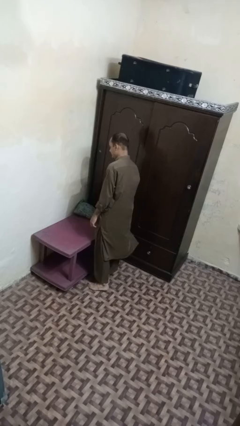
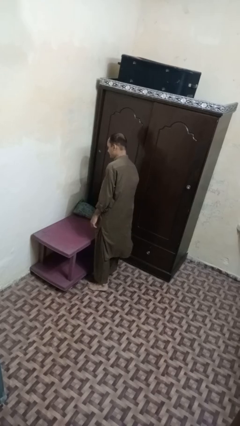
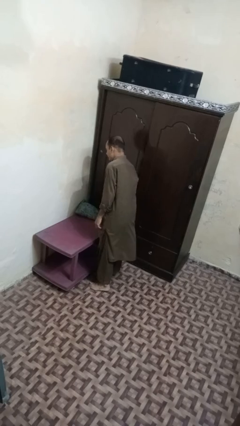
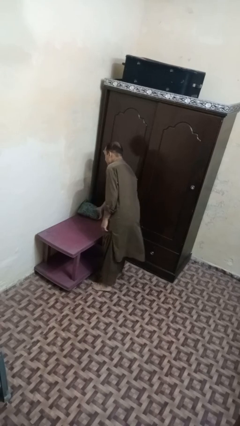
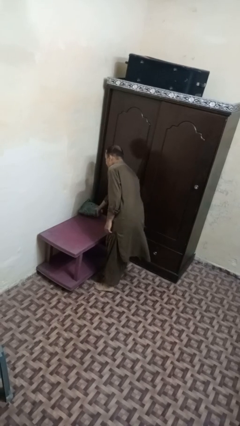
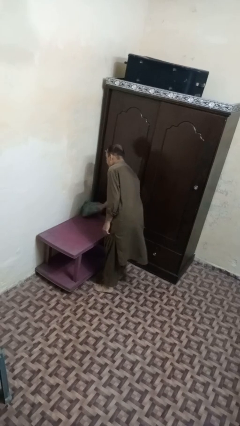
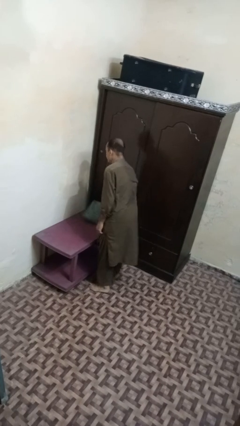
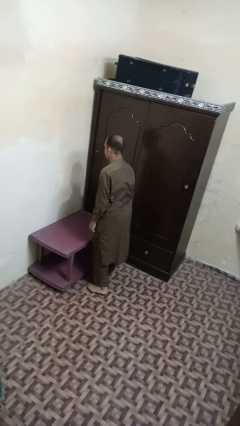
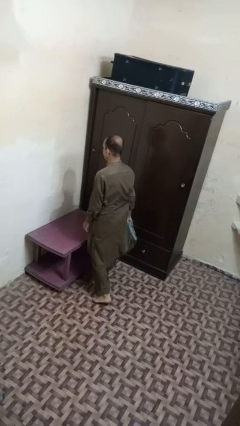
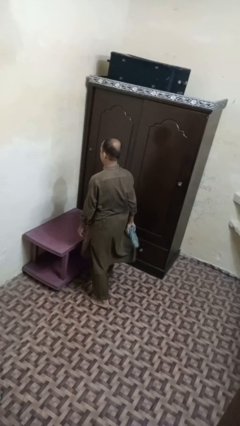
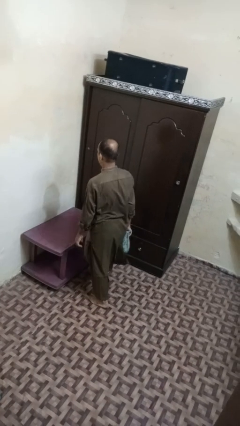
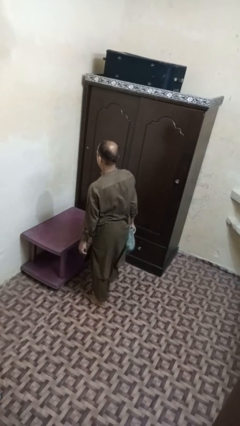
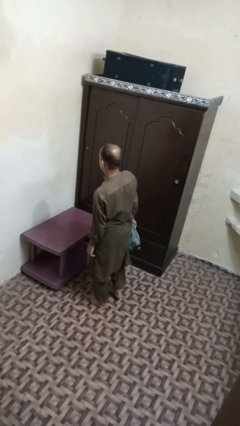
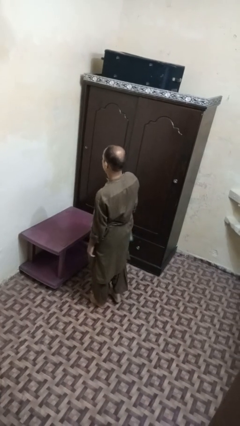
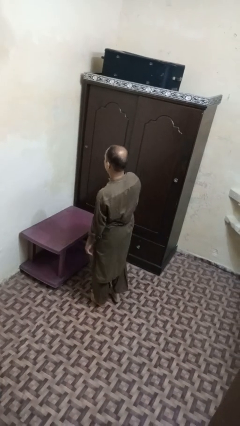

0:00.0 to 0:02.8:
person picks up object from table

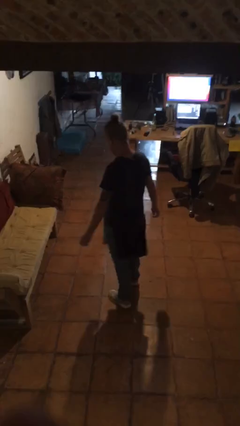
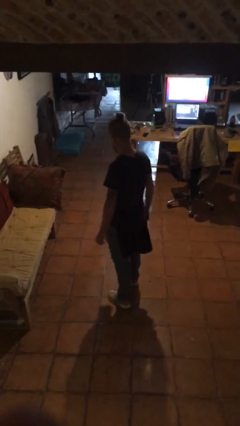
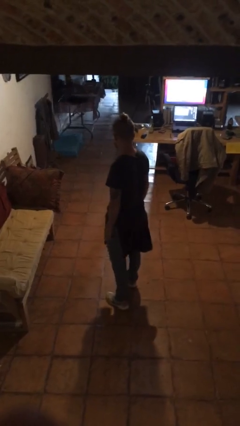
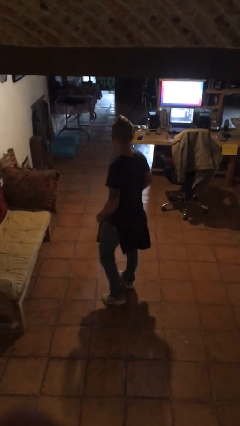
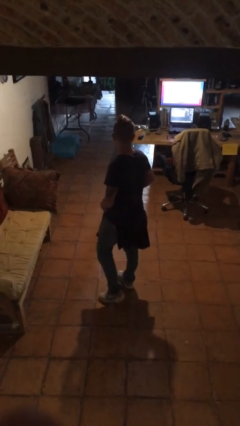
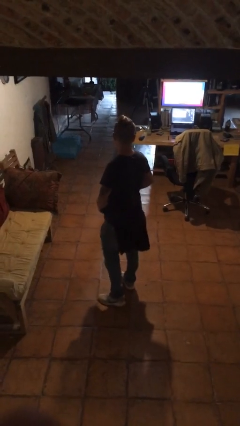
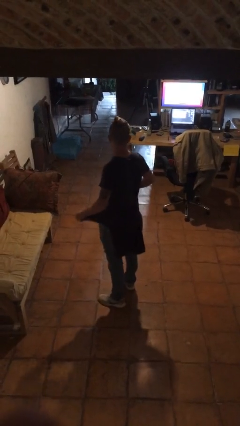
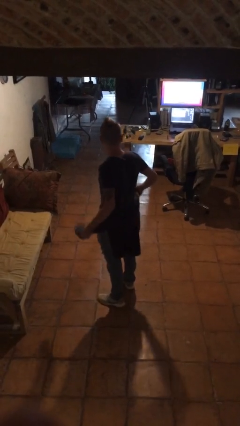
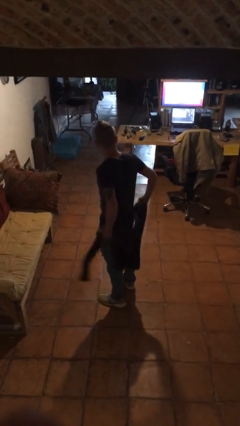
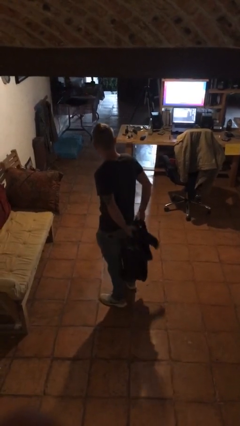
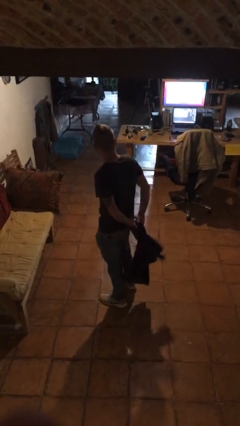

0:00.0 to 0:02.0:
person unties jacket around waist

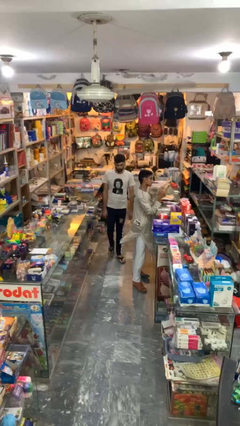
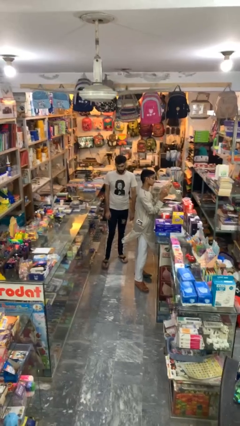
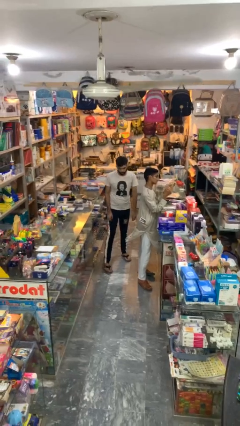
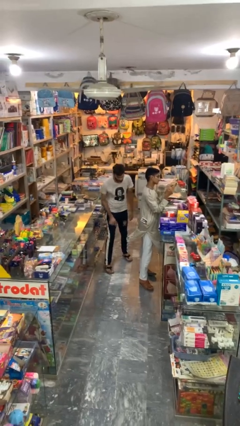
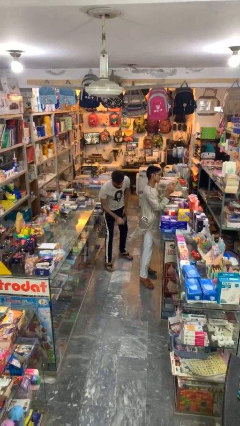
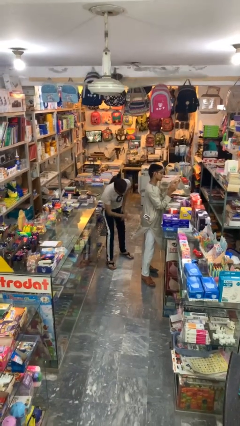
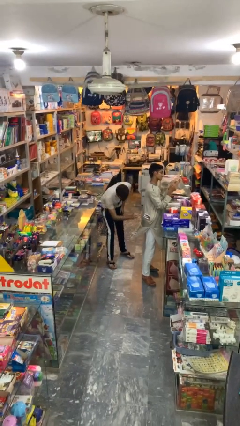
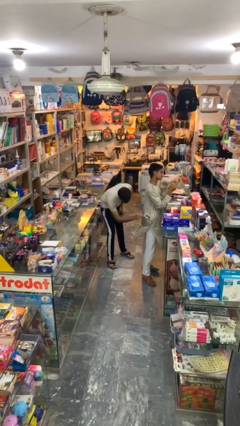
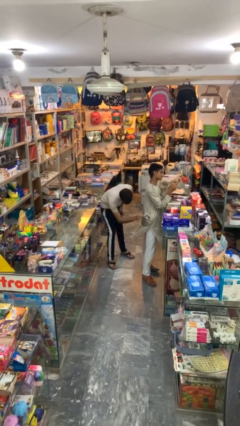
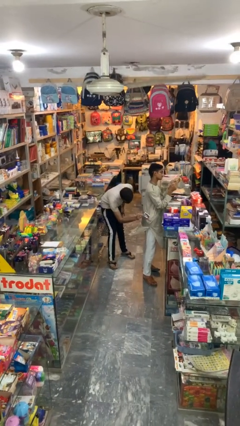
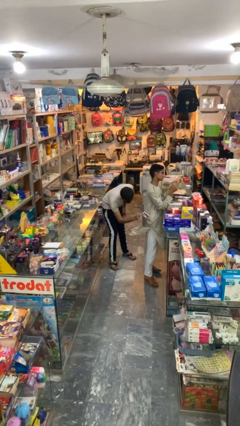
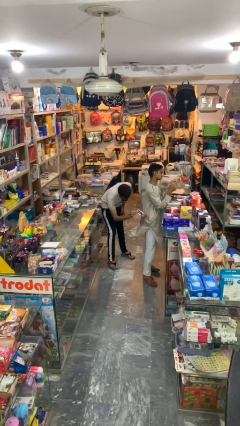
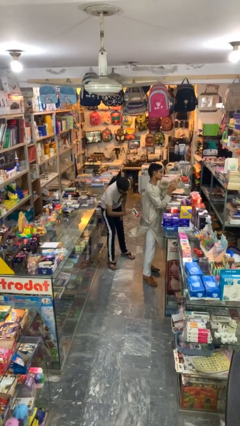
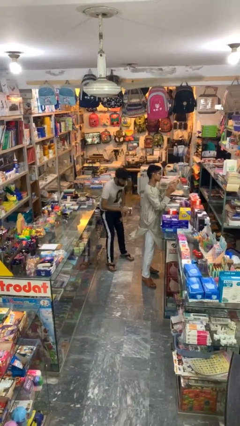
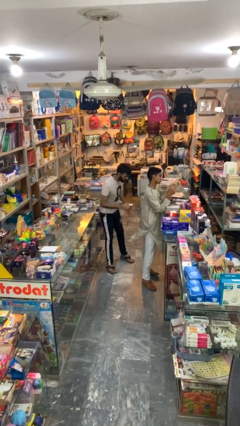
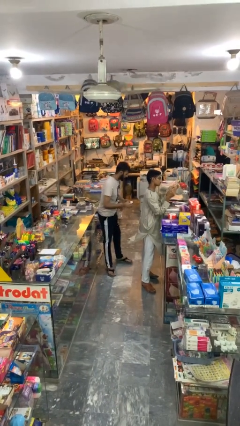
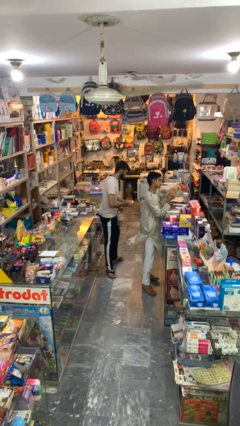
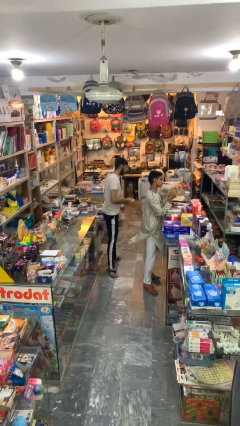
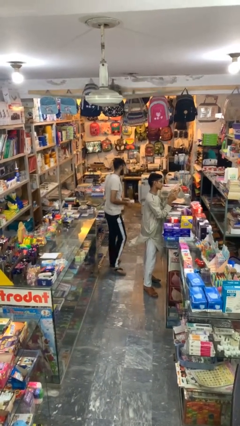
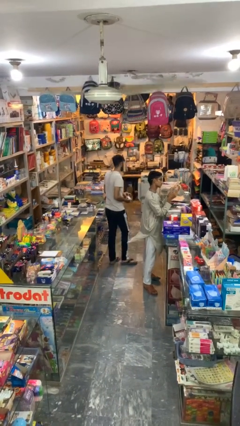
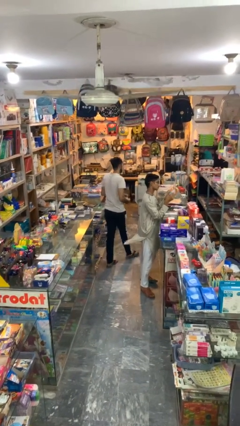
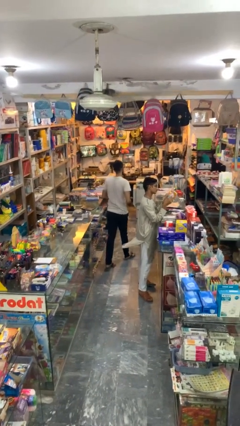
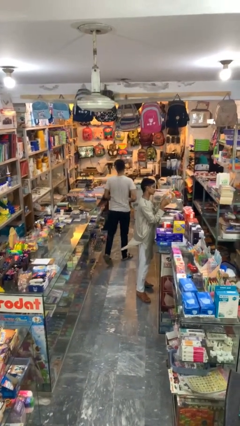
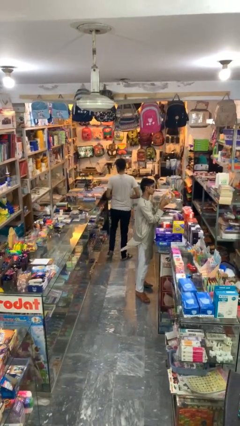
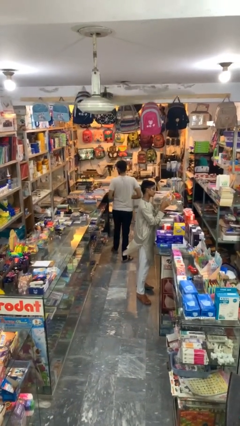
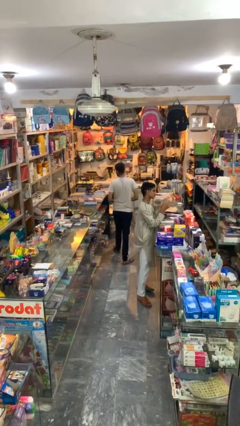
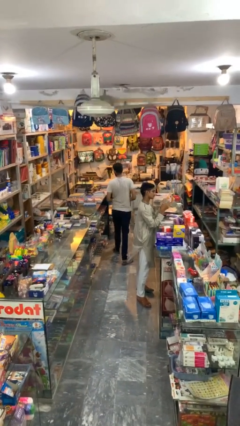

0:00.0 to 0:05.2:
person steals object from person

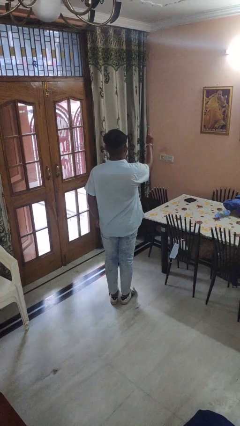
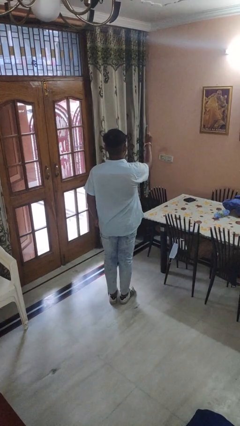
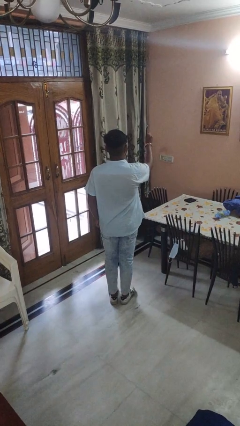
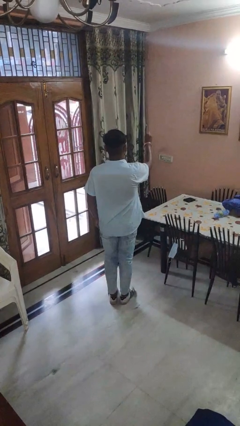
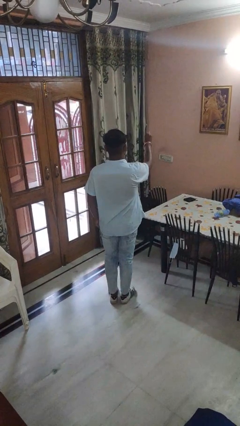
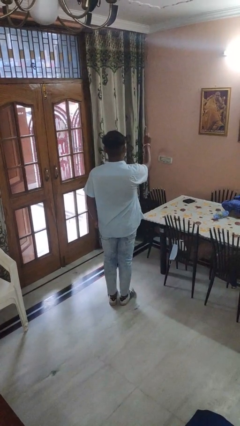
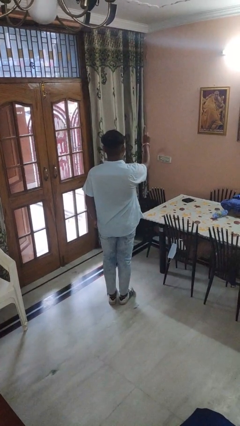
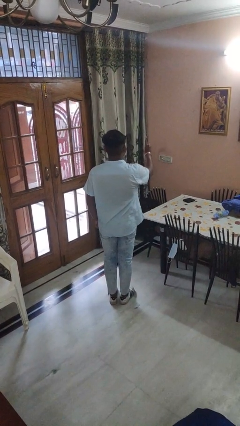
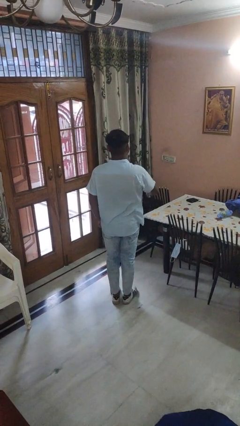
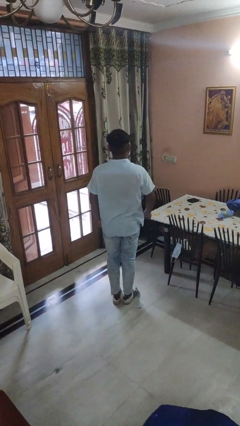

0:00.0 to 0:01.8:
person gestures number one

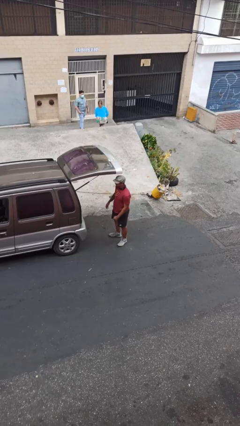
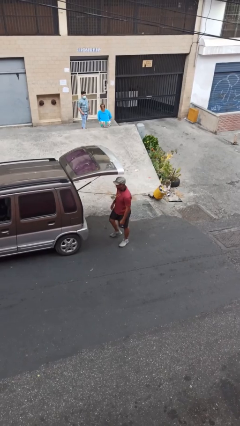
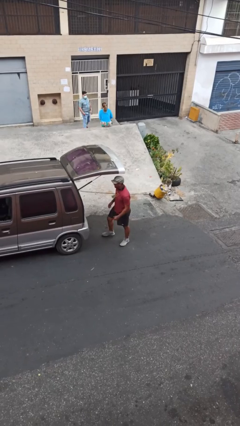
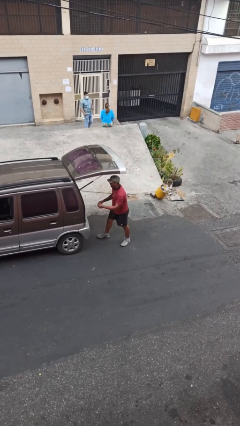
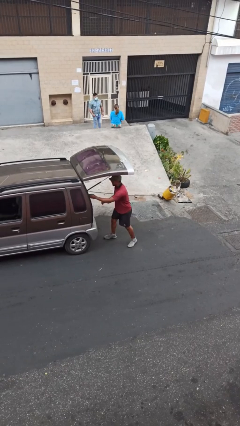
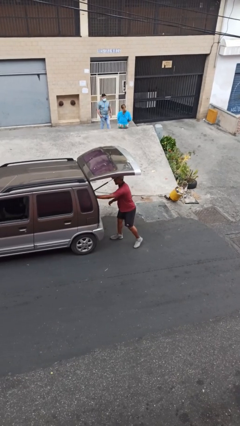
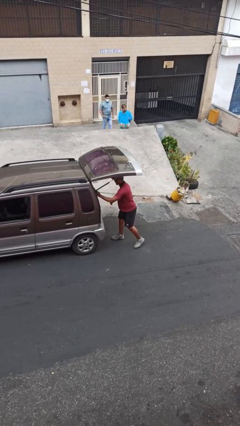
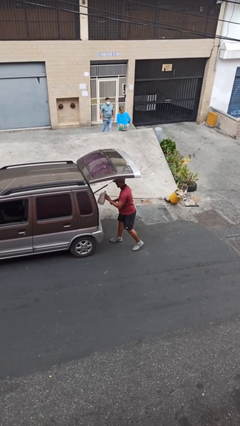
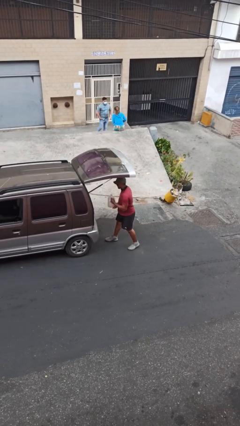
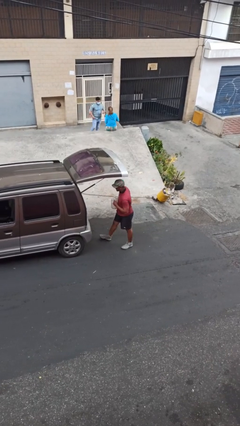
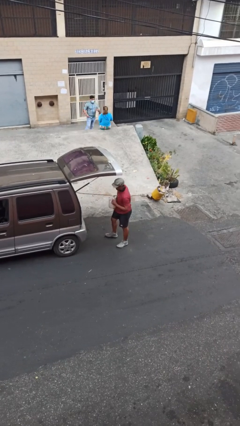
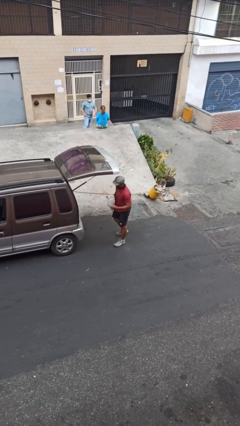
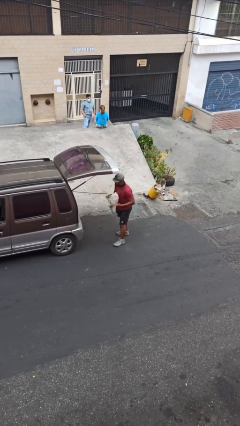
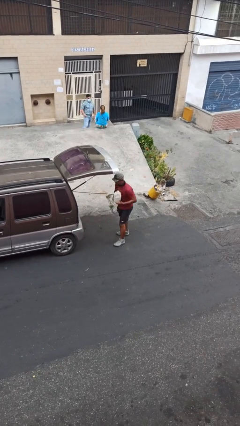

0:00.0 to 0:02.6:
person unloads car

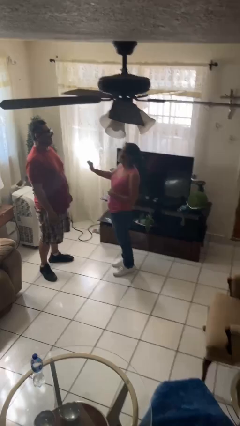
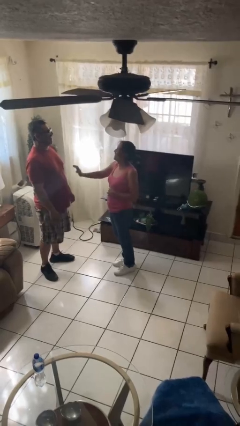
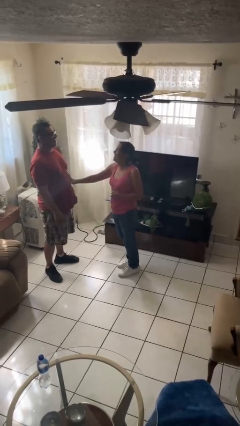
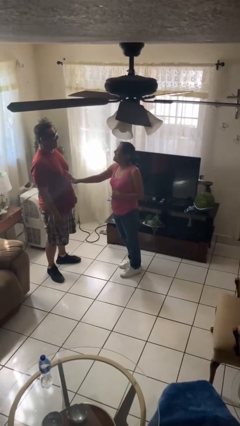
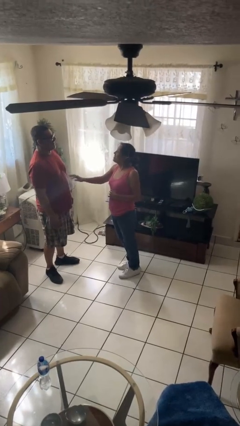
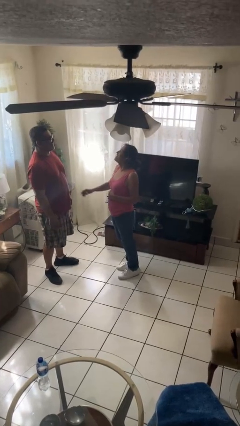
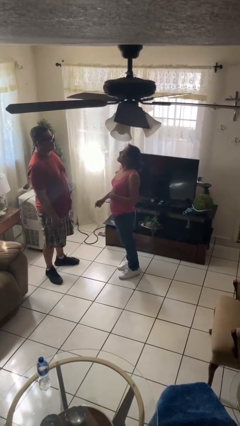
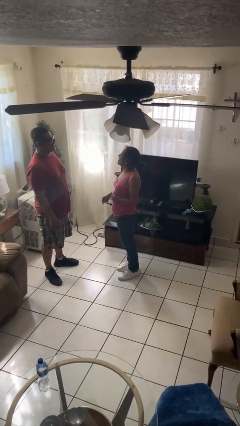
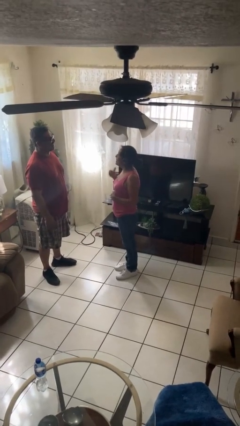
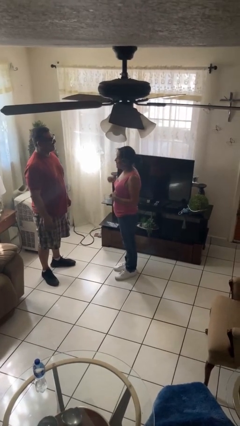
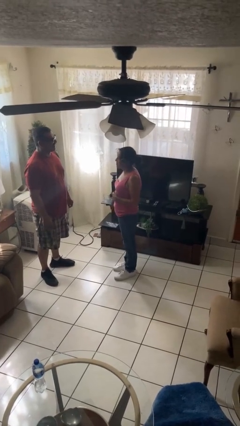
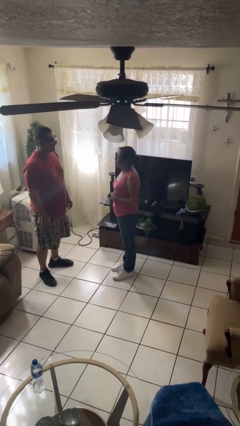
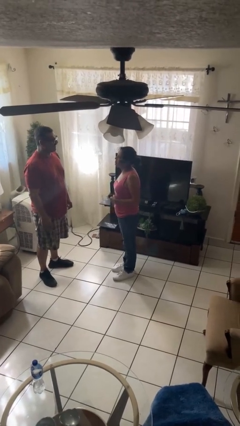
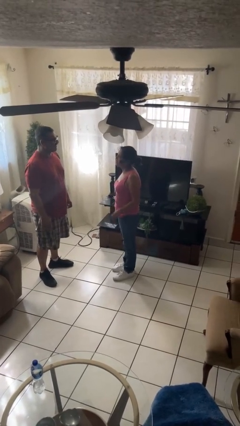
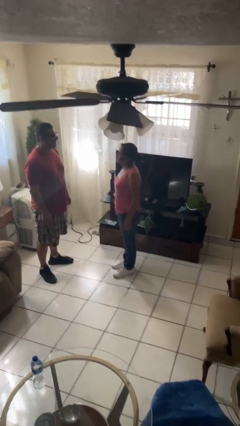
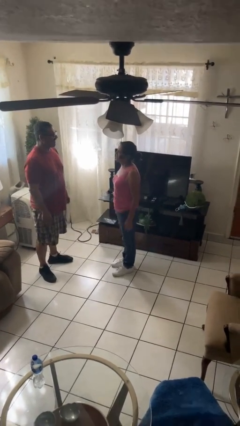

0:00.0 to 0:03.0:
person laughs with person

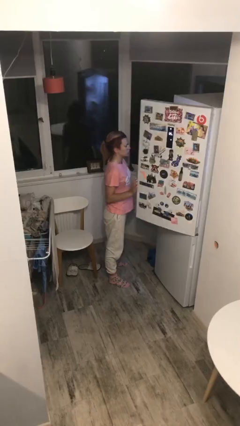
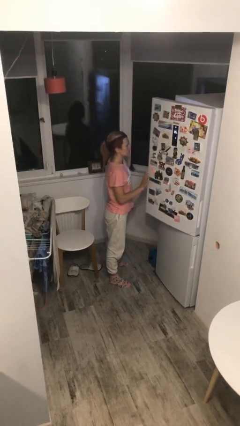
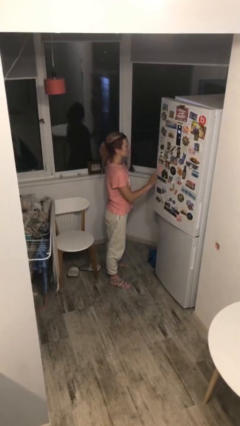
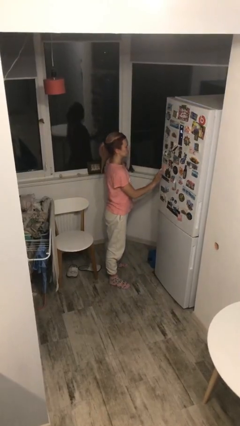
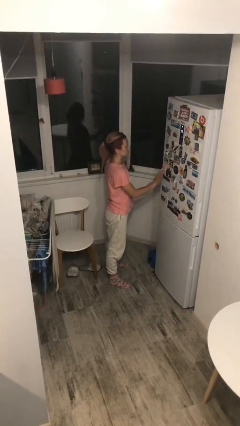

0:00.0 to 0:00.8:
person closes refrigerator
